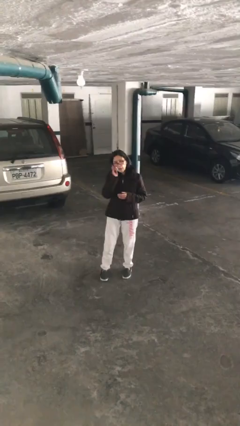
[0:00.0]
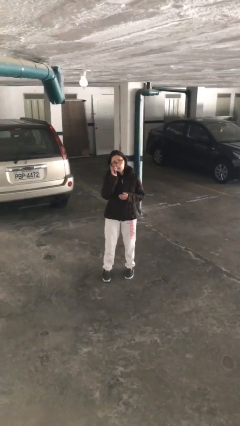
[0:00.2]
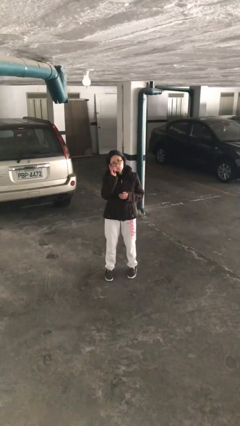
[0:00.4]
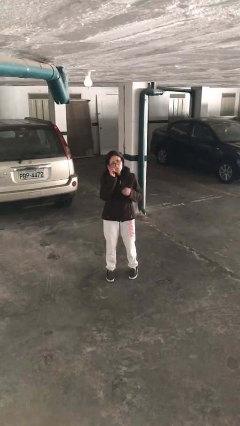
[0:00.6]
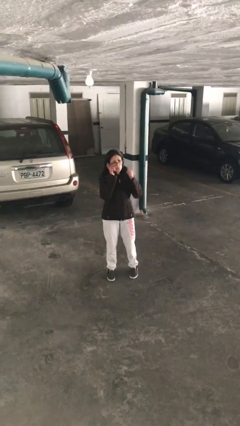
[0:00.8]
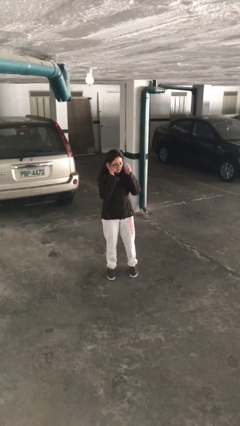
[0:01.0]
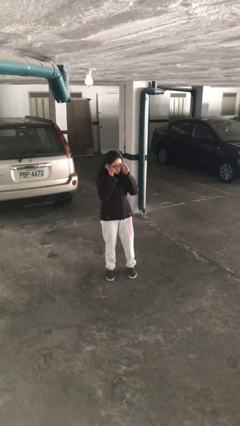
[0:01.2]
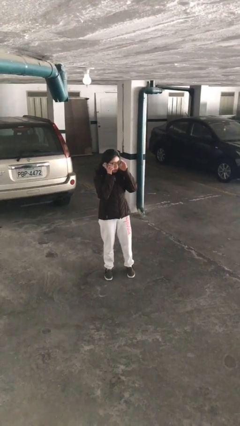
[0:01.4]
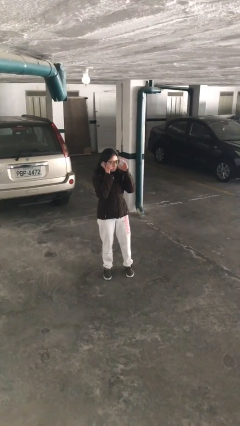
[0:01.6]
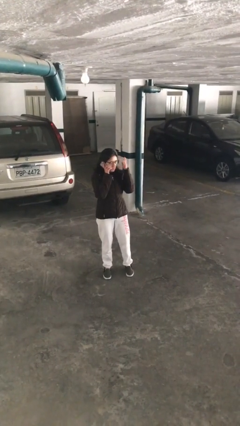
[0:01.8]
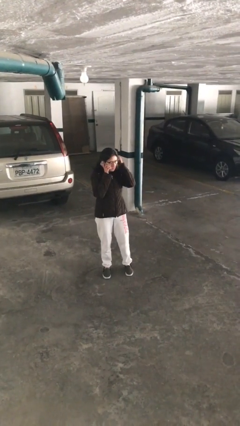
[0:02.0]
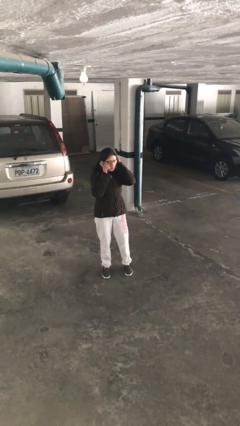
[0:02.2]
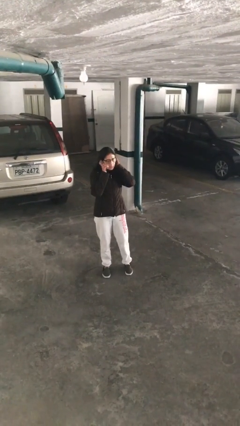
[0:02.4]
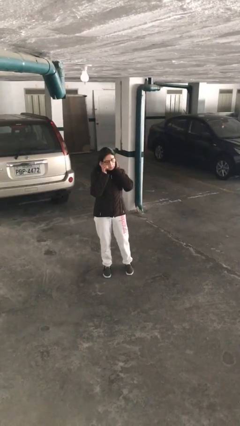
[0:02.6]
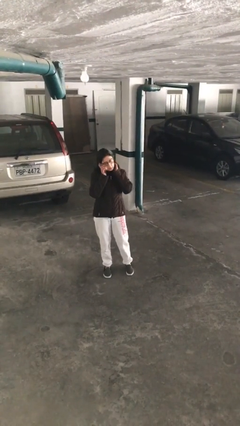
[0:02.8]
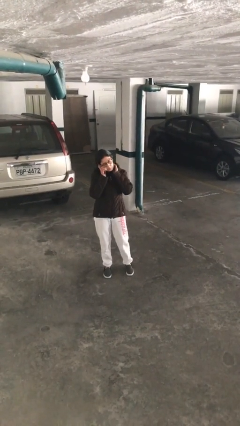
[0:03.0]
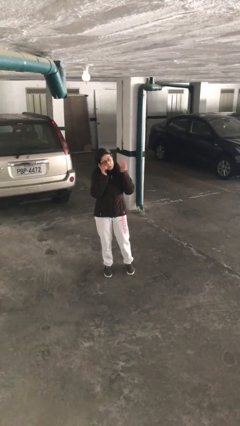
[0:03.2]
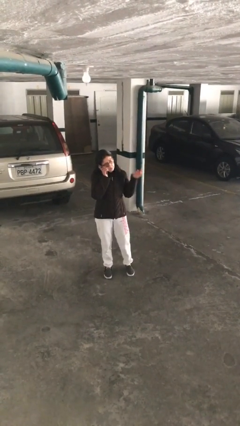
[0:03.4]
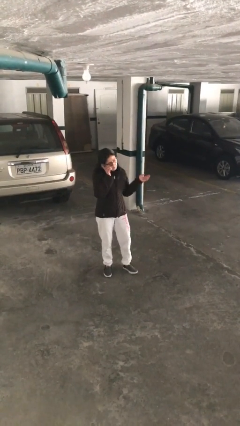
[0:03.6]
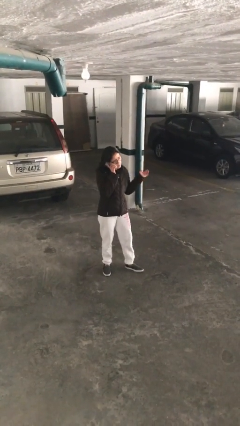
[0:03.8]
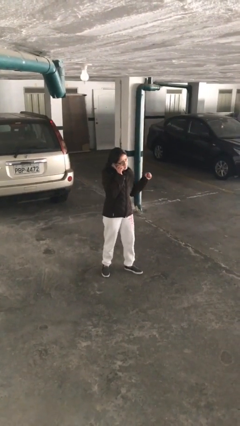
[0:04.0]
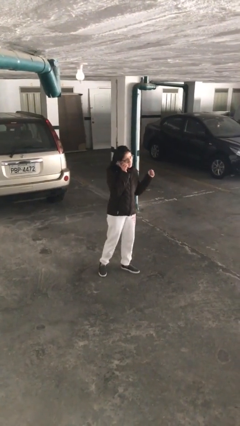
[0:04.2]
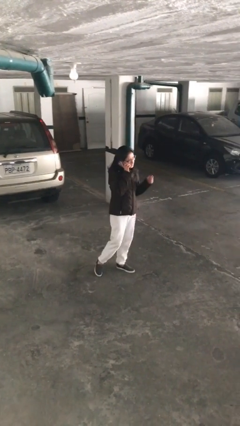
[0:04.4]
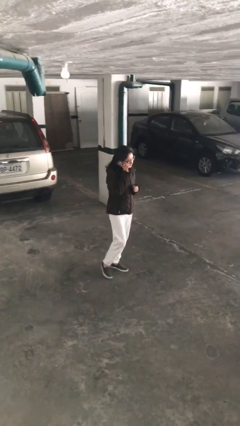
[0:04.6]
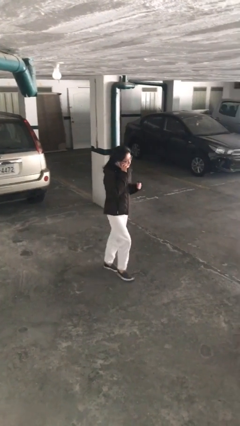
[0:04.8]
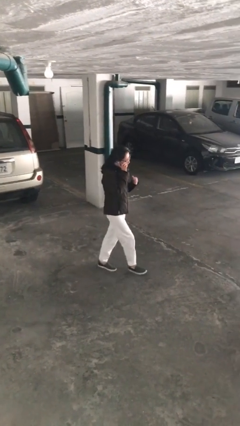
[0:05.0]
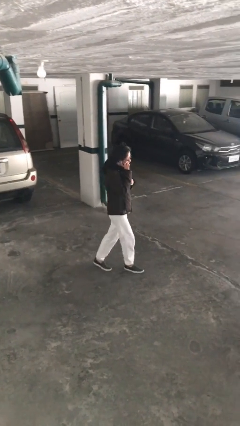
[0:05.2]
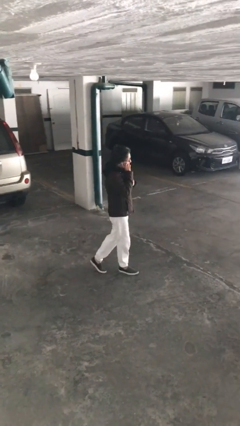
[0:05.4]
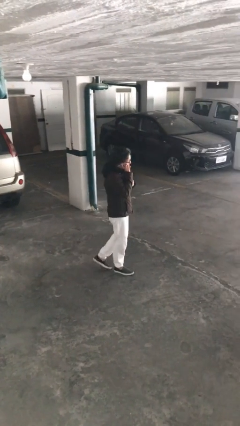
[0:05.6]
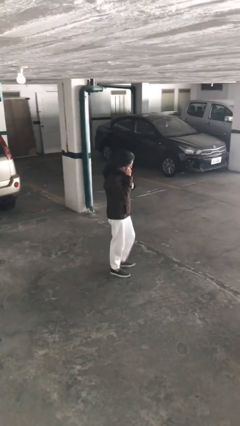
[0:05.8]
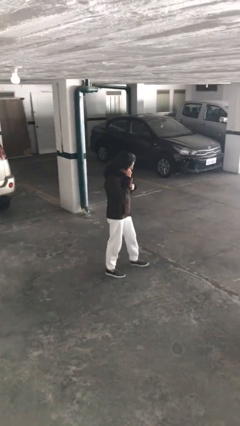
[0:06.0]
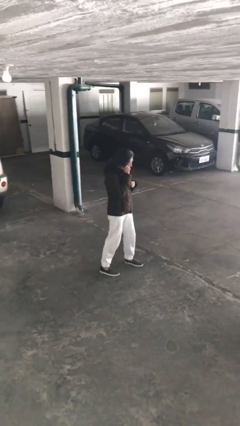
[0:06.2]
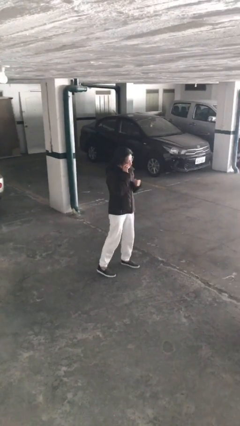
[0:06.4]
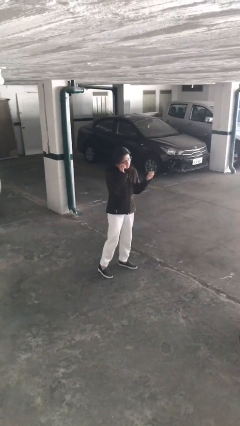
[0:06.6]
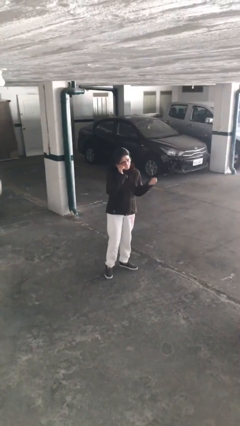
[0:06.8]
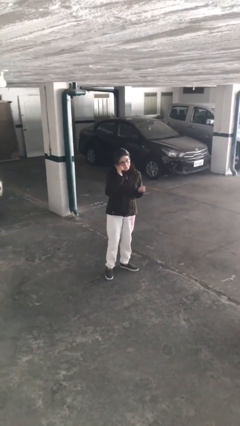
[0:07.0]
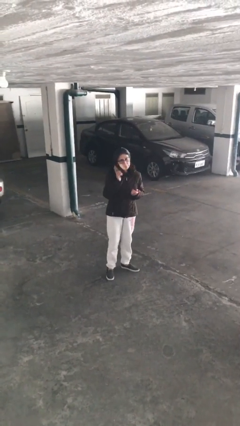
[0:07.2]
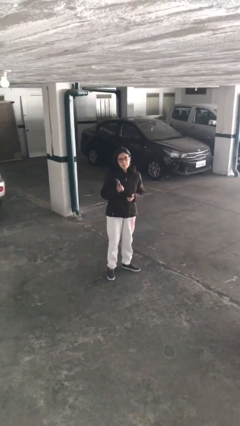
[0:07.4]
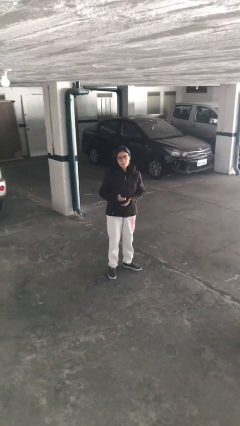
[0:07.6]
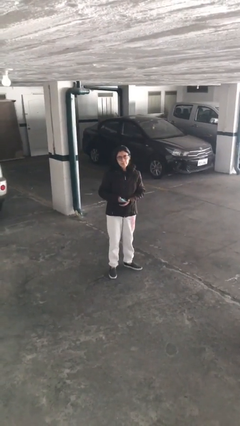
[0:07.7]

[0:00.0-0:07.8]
person talks on phone

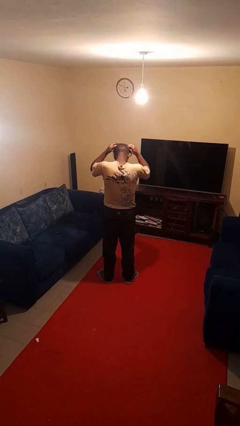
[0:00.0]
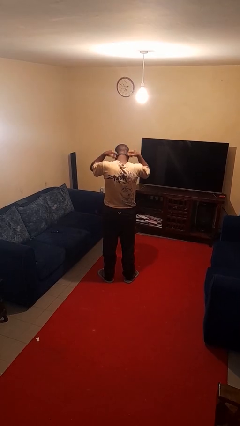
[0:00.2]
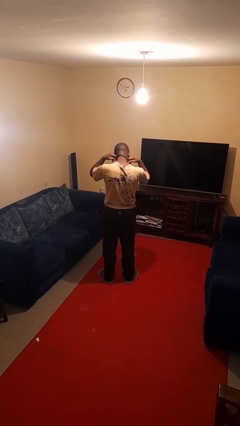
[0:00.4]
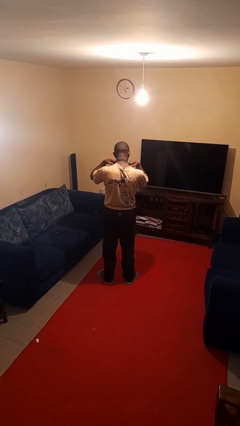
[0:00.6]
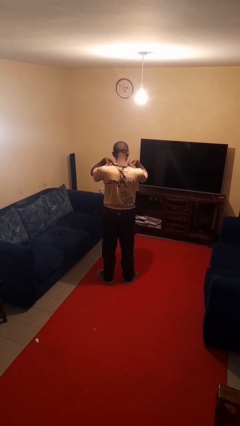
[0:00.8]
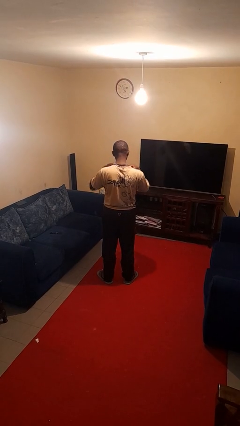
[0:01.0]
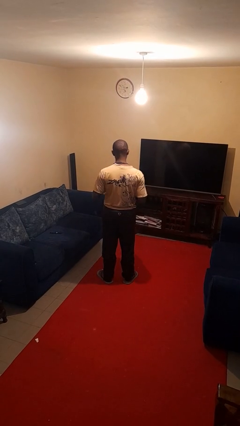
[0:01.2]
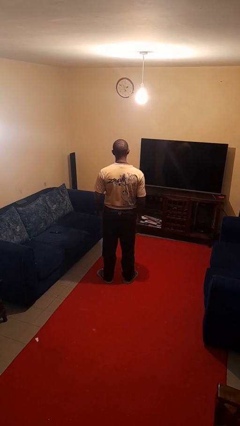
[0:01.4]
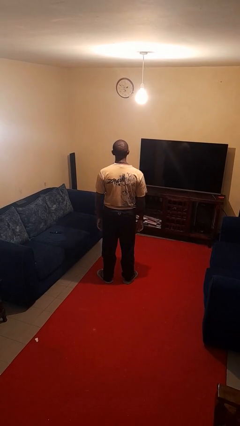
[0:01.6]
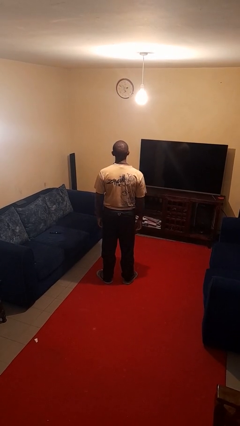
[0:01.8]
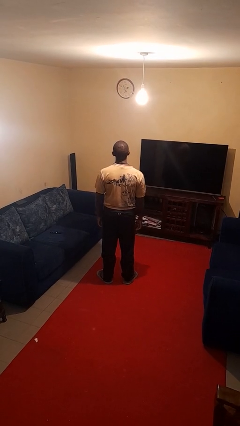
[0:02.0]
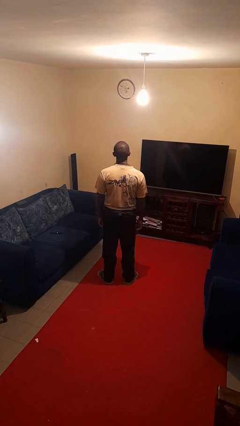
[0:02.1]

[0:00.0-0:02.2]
person puts on necklace

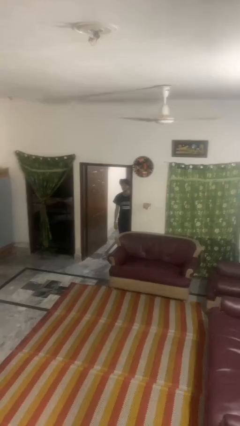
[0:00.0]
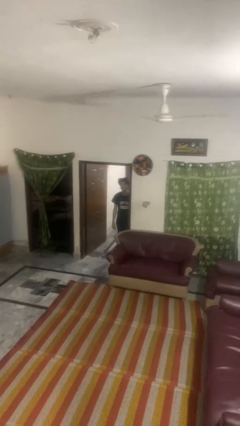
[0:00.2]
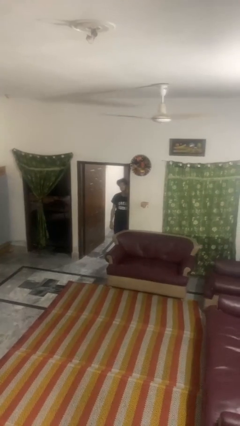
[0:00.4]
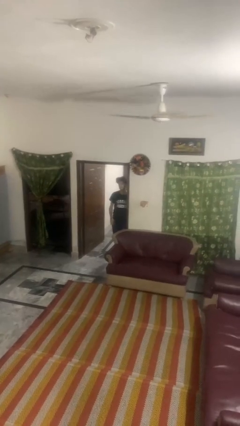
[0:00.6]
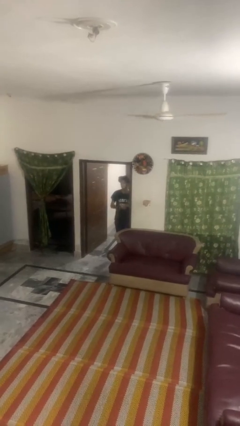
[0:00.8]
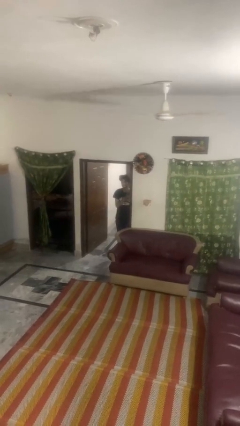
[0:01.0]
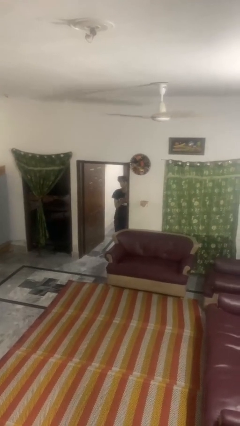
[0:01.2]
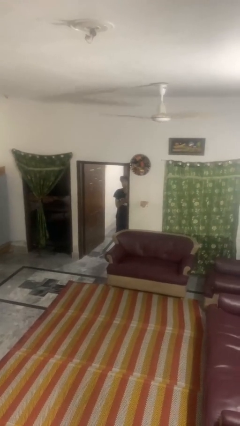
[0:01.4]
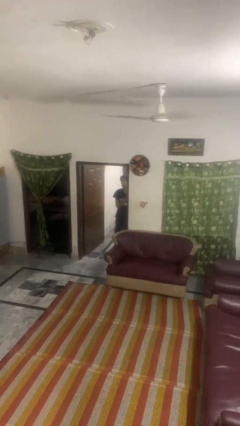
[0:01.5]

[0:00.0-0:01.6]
person bumps into wall

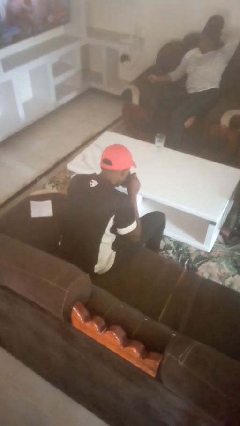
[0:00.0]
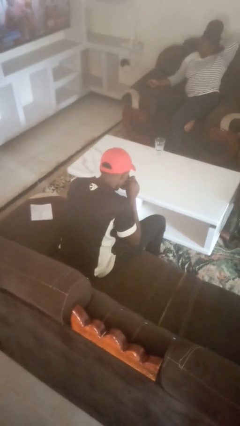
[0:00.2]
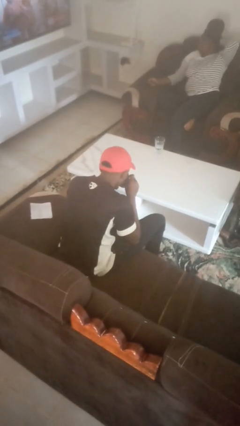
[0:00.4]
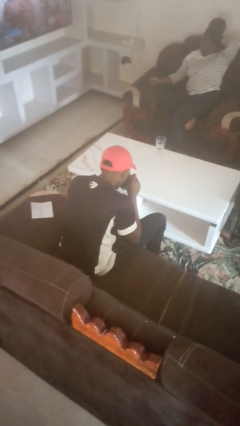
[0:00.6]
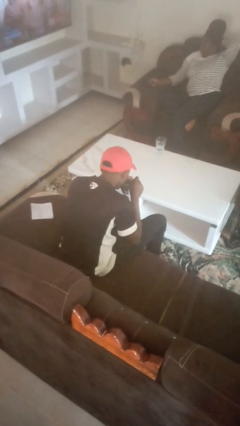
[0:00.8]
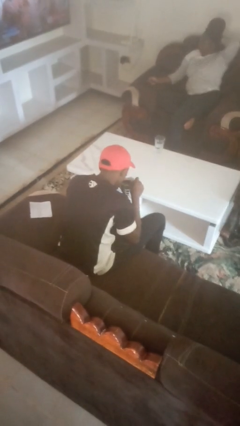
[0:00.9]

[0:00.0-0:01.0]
person drinks from mug

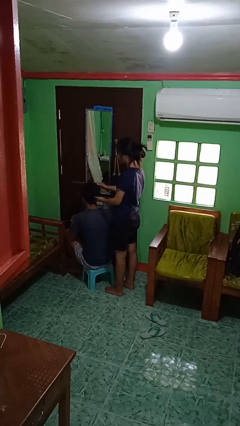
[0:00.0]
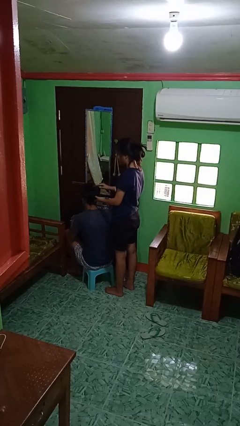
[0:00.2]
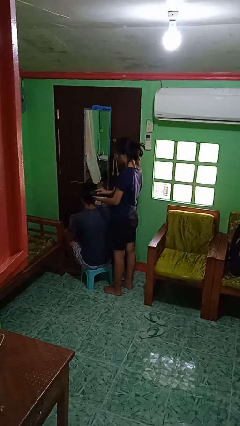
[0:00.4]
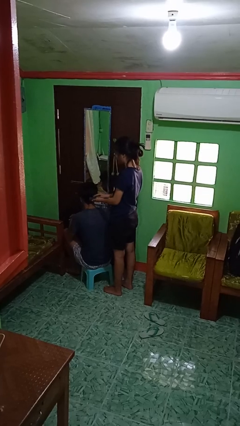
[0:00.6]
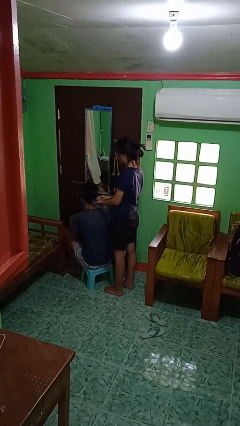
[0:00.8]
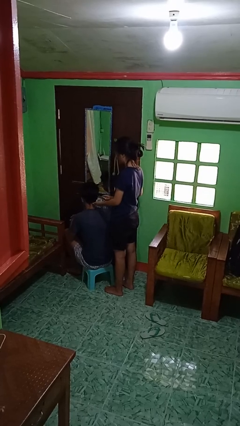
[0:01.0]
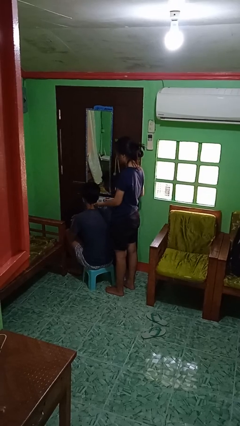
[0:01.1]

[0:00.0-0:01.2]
person brushes hair of person

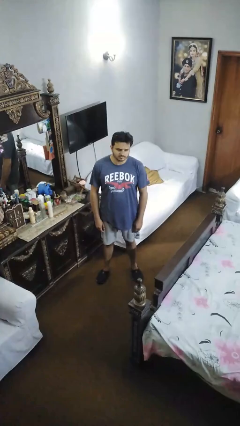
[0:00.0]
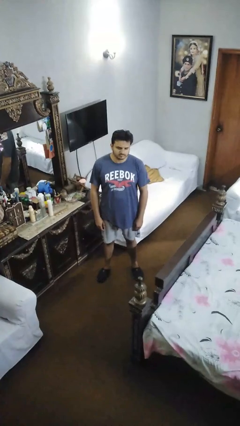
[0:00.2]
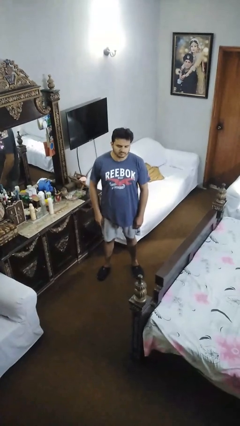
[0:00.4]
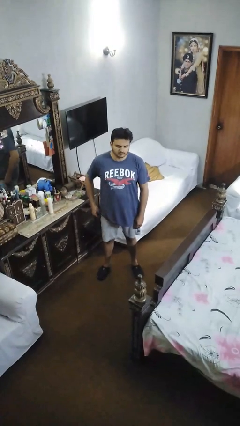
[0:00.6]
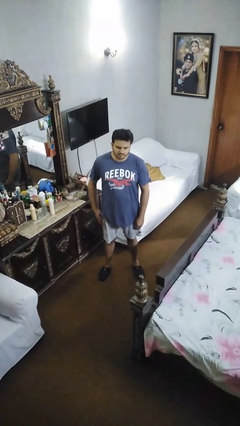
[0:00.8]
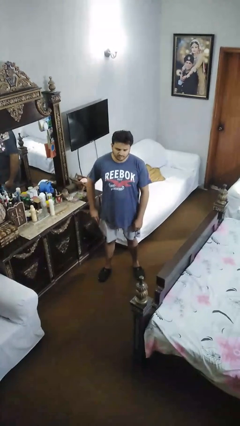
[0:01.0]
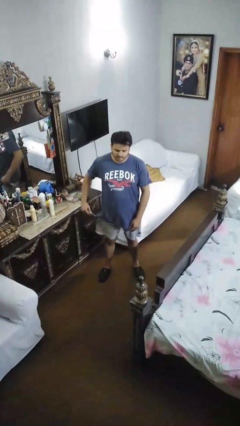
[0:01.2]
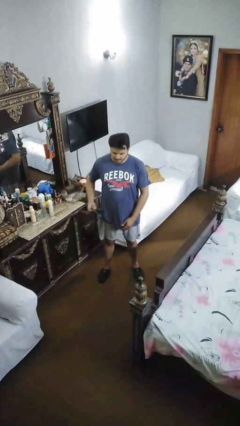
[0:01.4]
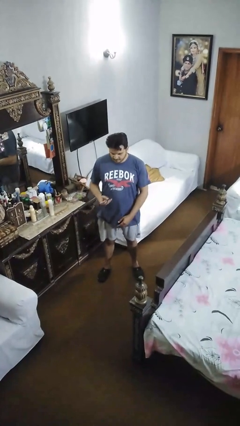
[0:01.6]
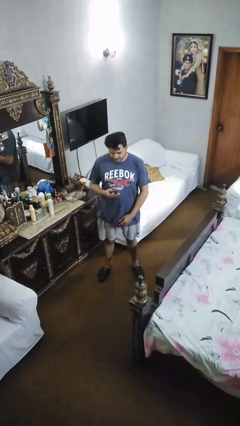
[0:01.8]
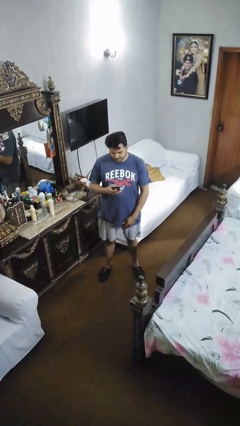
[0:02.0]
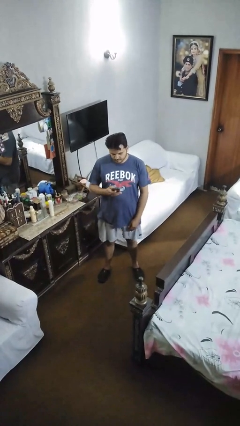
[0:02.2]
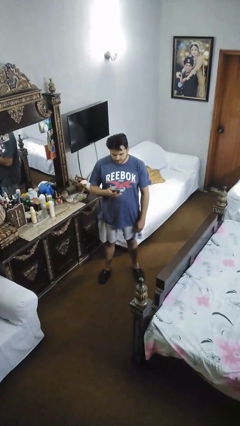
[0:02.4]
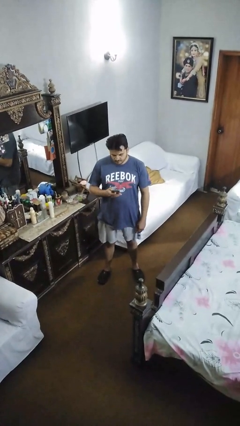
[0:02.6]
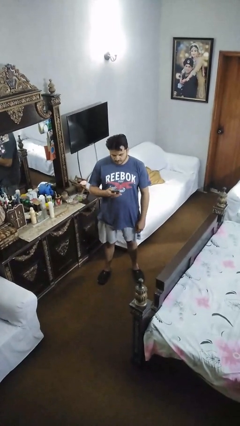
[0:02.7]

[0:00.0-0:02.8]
person takes phone from pocket

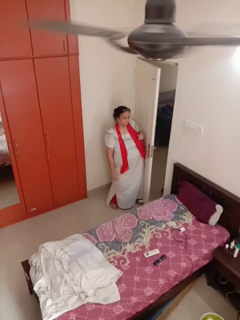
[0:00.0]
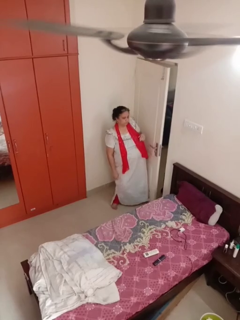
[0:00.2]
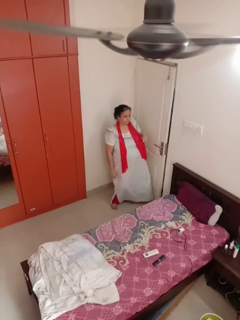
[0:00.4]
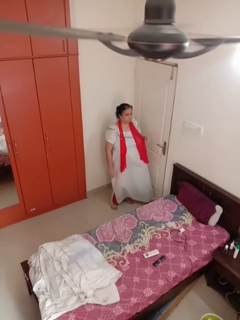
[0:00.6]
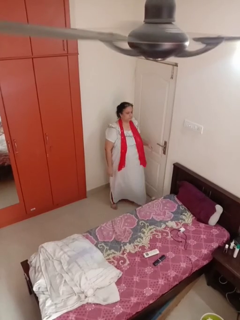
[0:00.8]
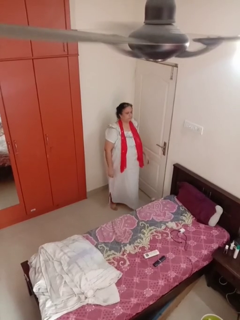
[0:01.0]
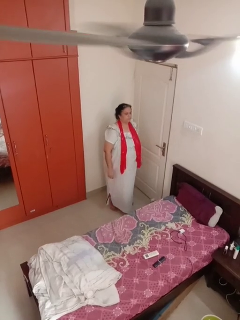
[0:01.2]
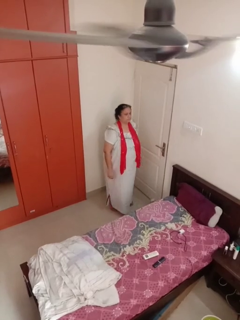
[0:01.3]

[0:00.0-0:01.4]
person closes door with hip
